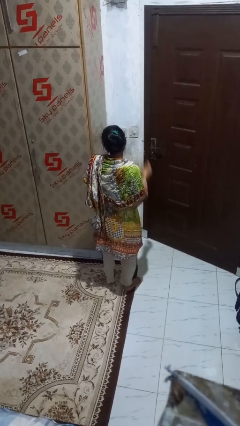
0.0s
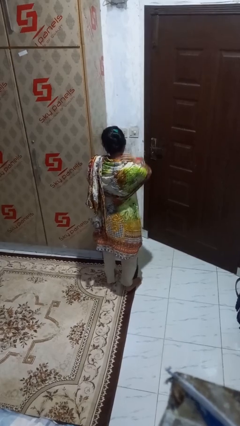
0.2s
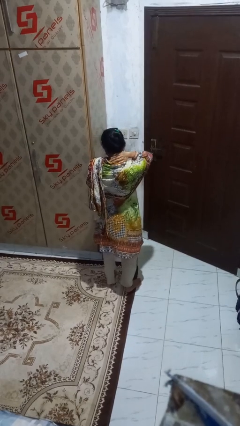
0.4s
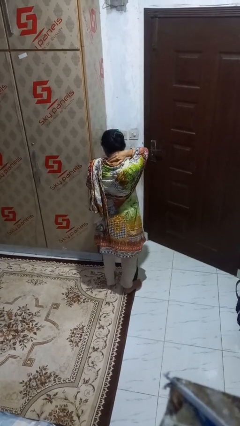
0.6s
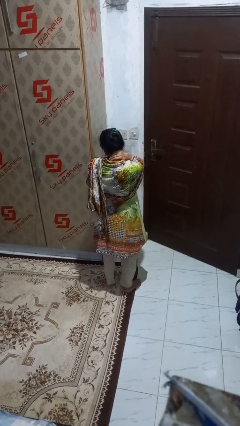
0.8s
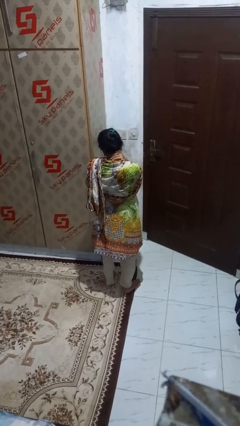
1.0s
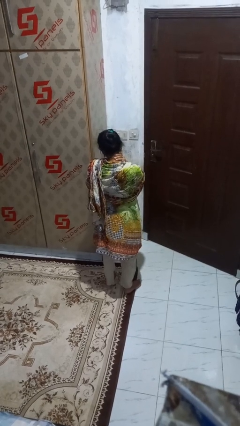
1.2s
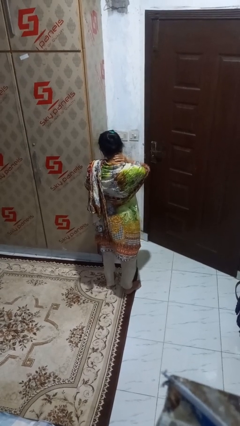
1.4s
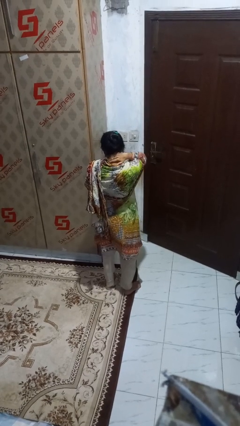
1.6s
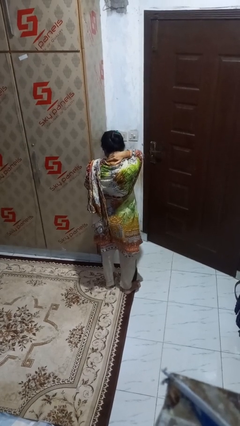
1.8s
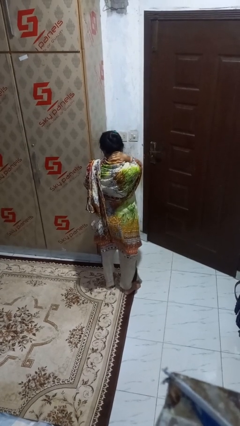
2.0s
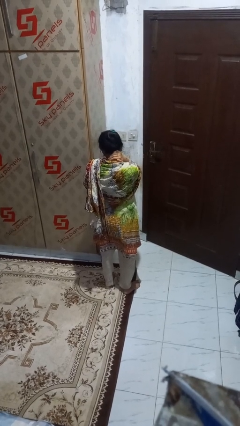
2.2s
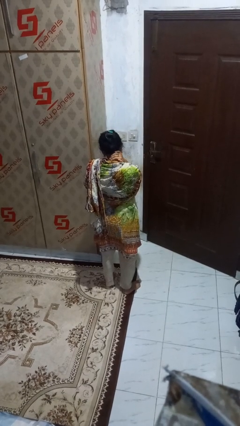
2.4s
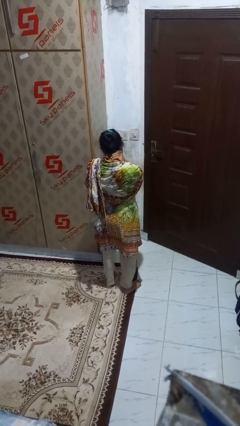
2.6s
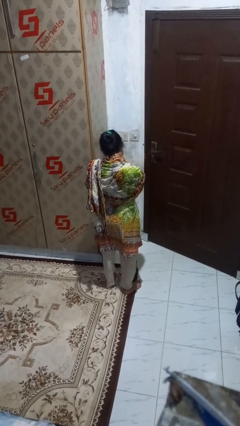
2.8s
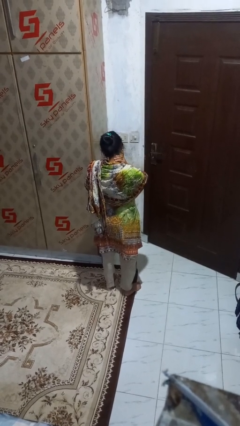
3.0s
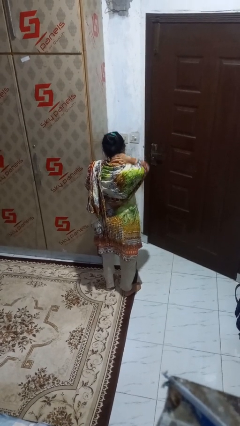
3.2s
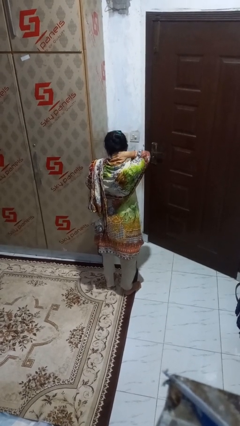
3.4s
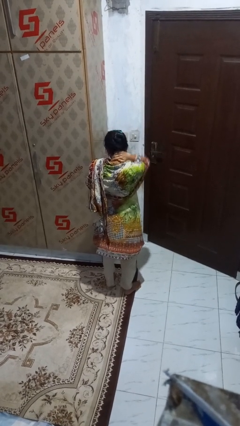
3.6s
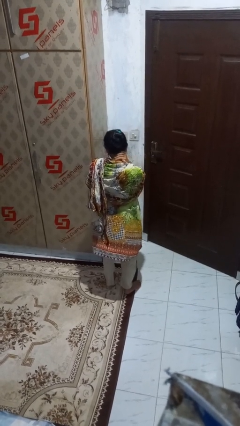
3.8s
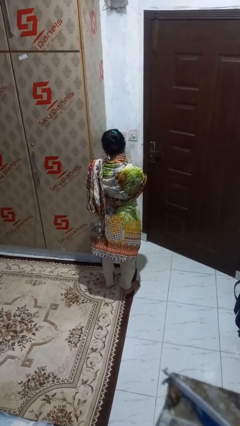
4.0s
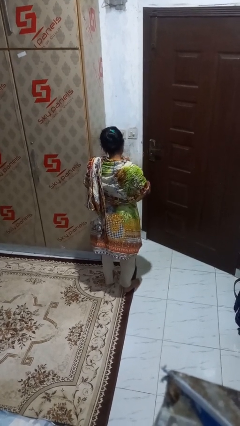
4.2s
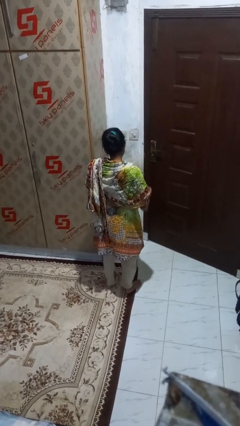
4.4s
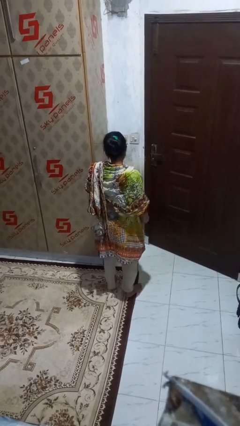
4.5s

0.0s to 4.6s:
person rubs neck

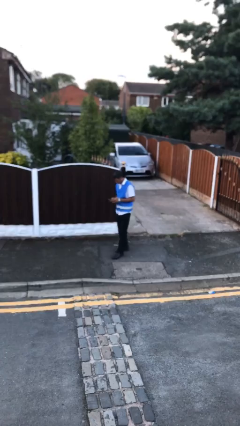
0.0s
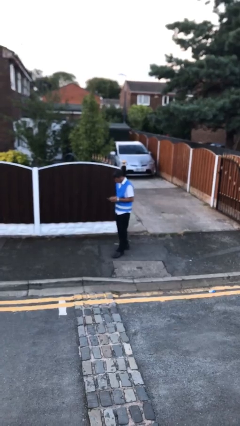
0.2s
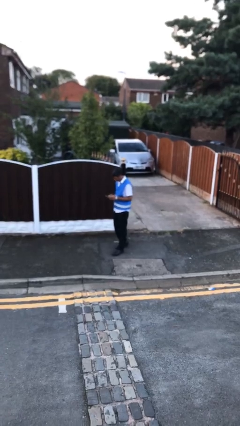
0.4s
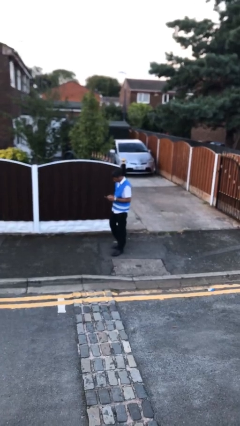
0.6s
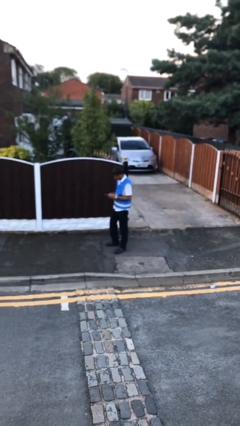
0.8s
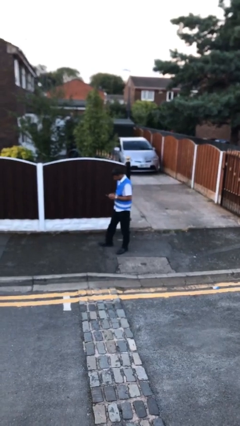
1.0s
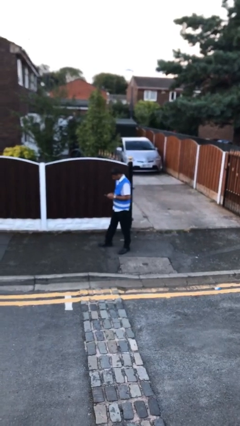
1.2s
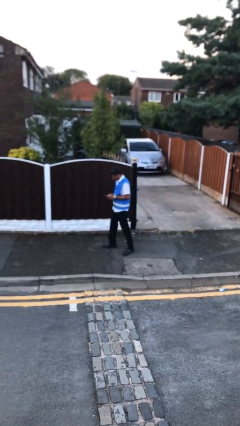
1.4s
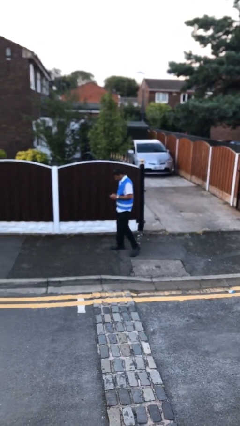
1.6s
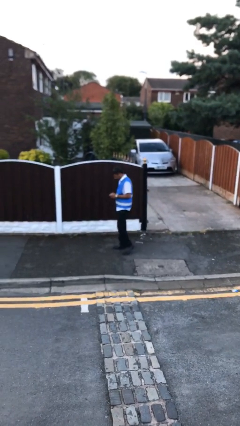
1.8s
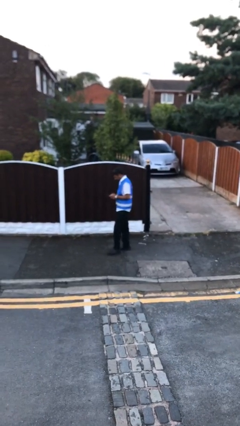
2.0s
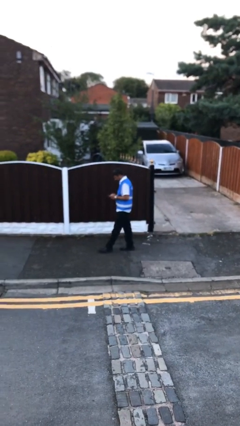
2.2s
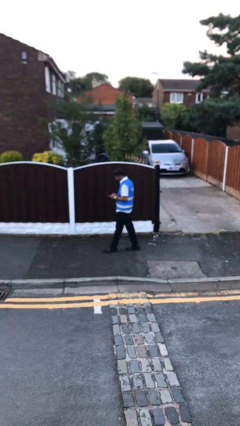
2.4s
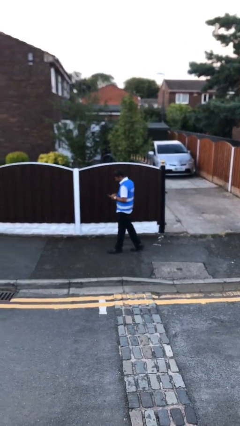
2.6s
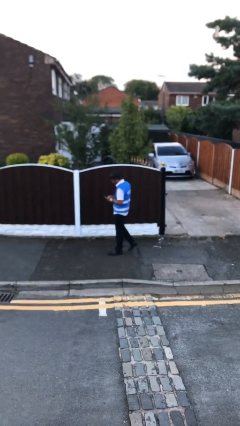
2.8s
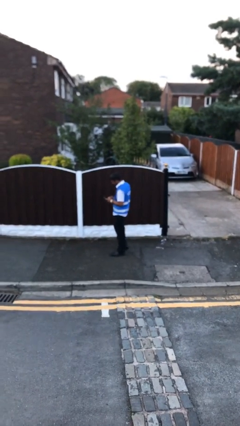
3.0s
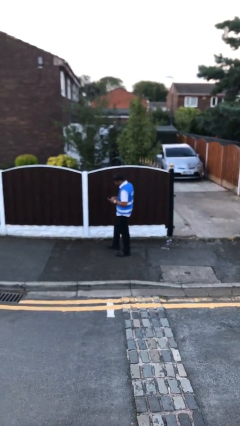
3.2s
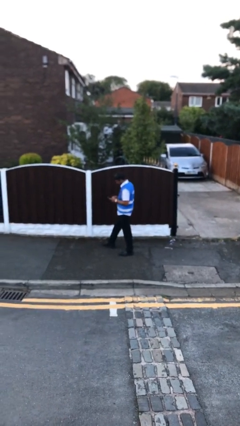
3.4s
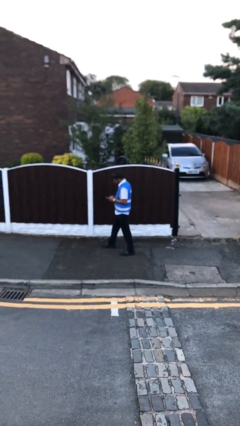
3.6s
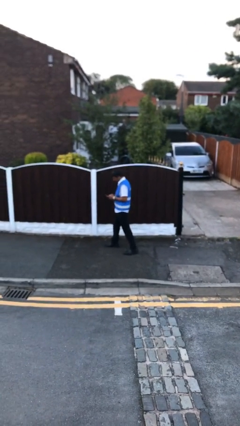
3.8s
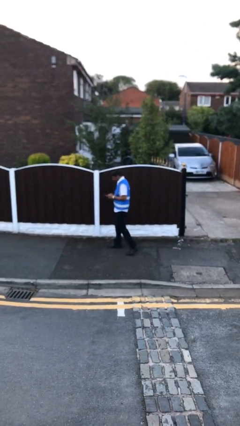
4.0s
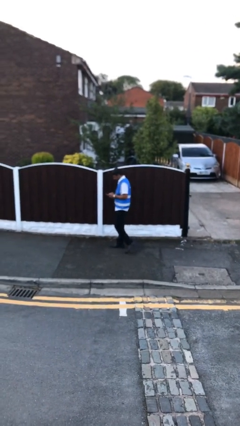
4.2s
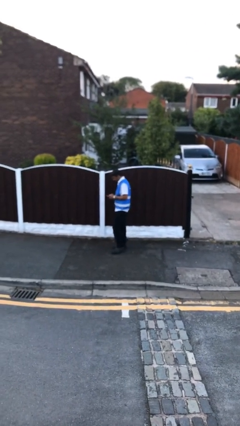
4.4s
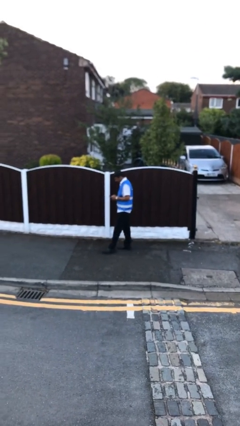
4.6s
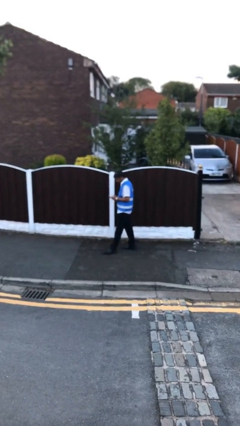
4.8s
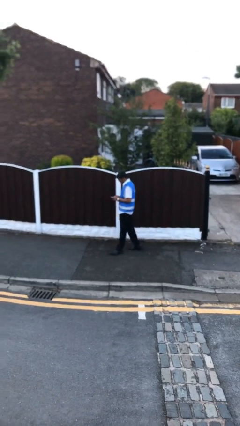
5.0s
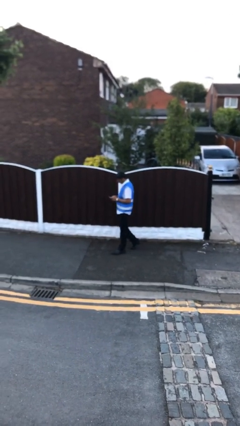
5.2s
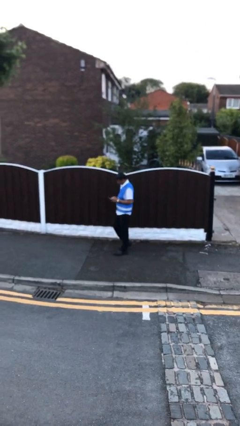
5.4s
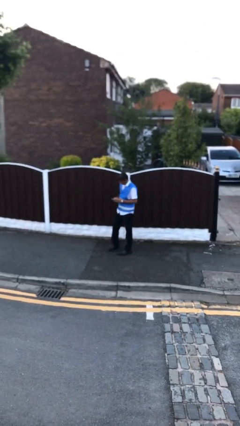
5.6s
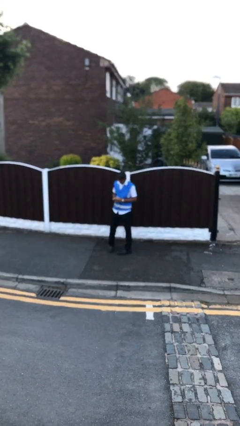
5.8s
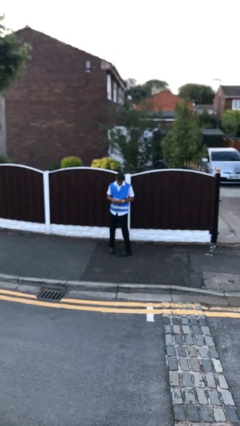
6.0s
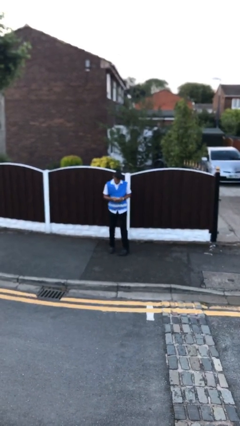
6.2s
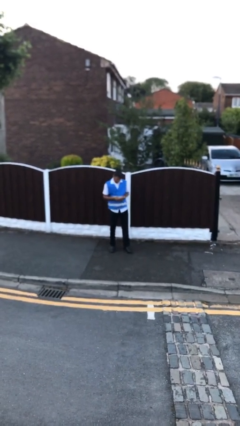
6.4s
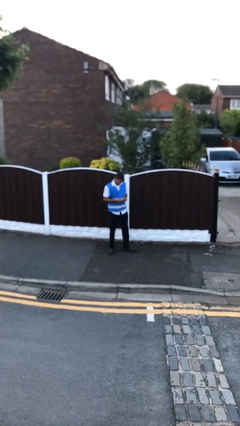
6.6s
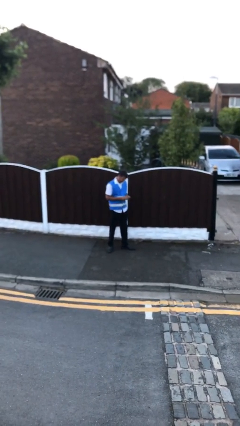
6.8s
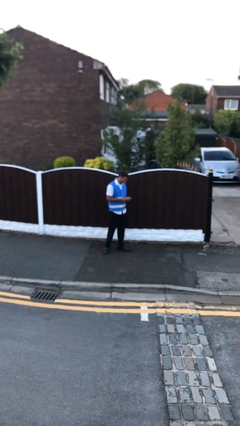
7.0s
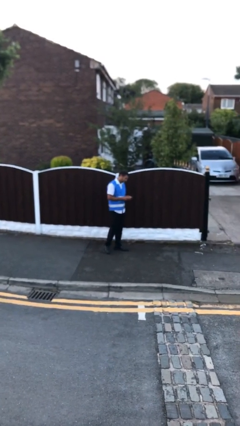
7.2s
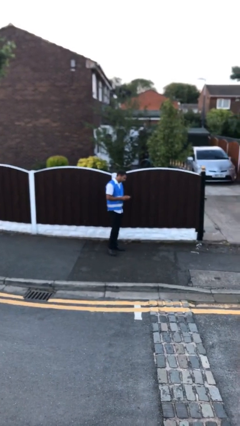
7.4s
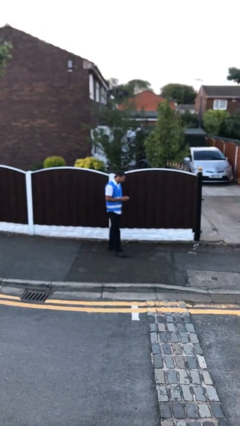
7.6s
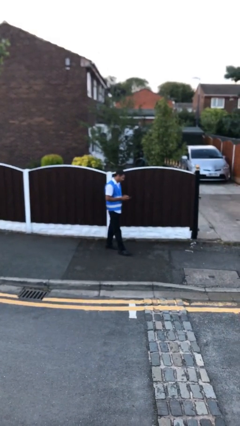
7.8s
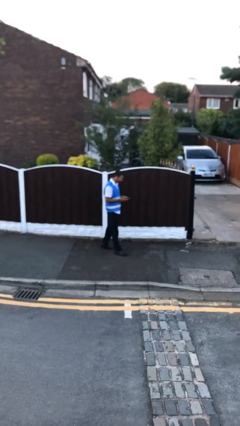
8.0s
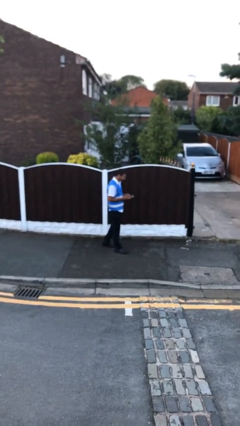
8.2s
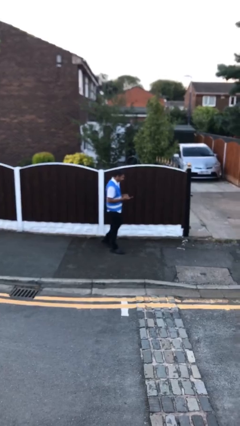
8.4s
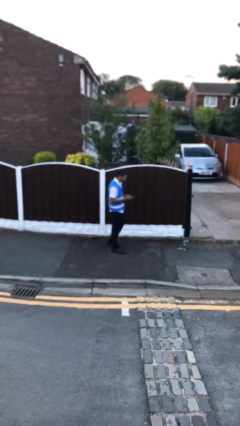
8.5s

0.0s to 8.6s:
person texts on phone

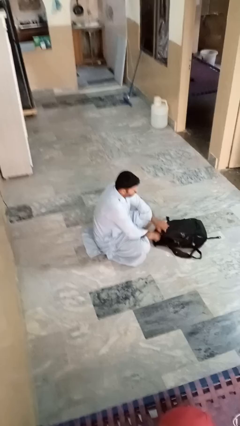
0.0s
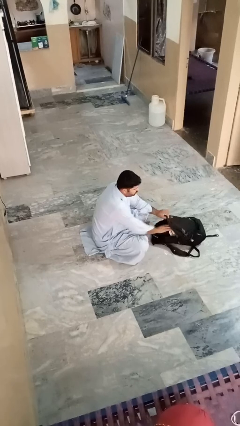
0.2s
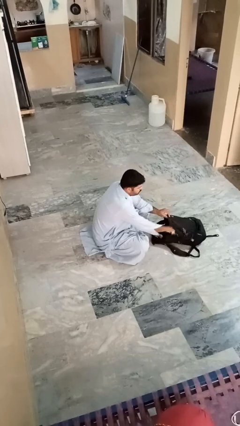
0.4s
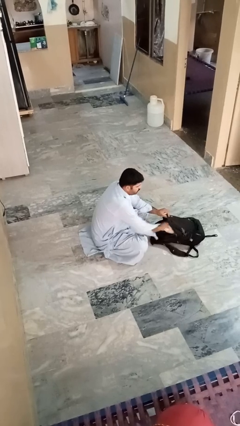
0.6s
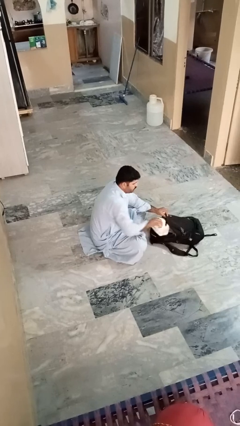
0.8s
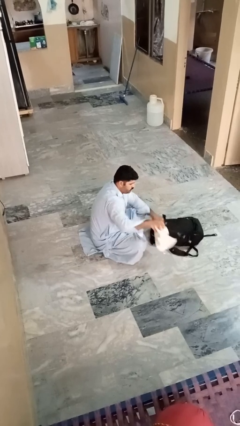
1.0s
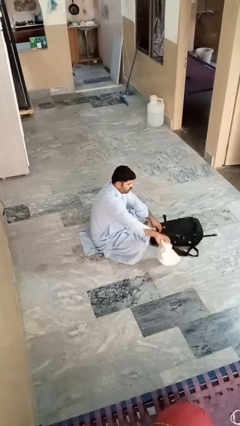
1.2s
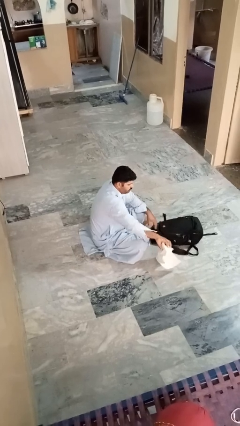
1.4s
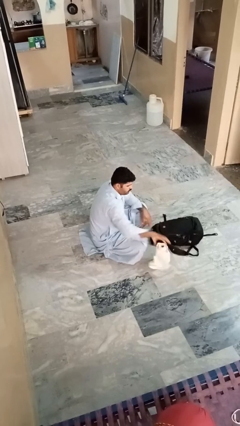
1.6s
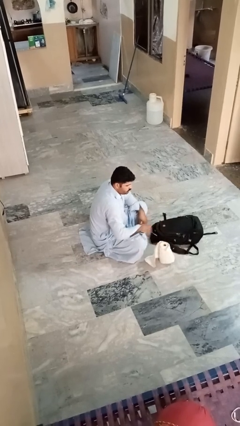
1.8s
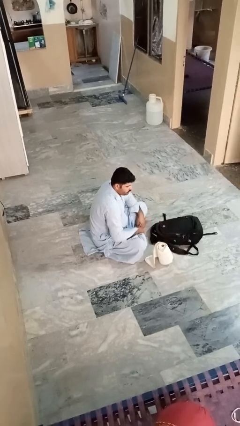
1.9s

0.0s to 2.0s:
person takes object from bag

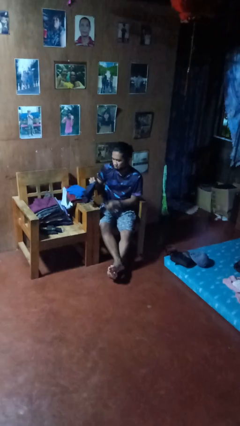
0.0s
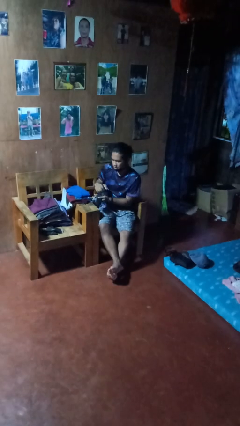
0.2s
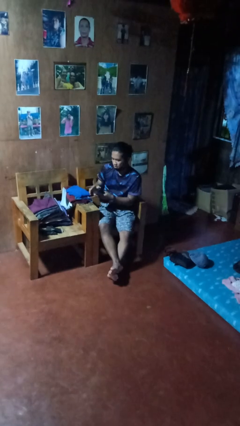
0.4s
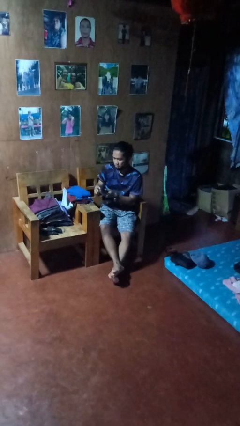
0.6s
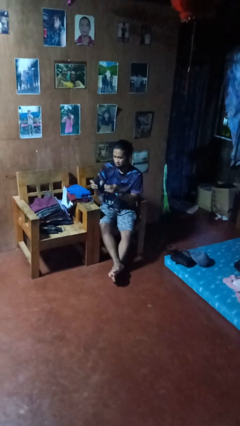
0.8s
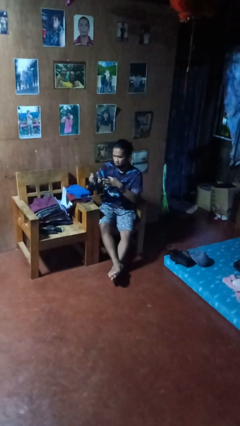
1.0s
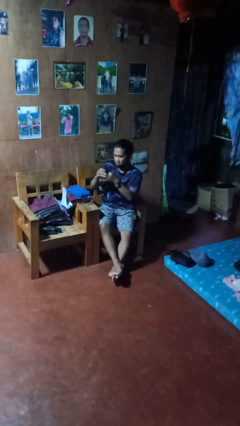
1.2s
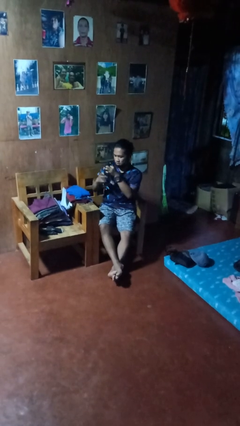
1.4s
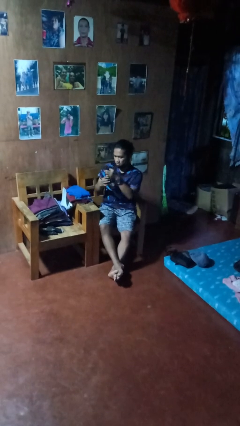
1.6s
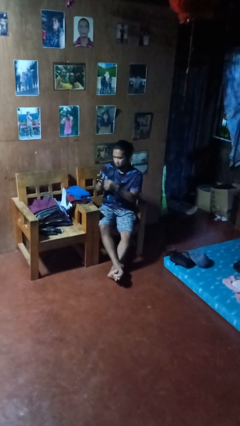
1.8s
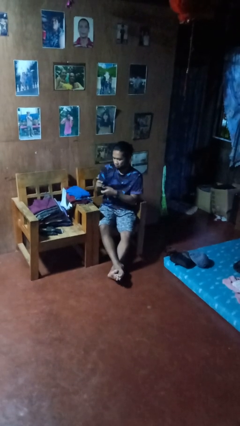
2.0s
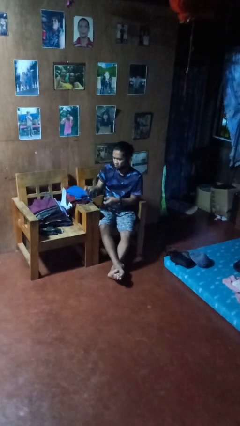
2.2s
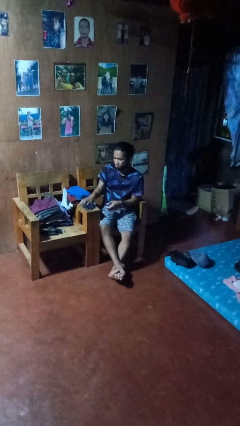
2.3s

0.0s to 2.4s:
person folds socks
